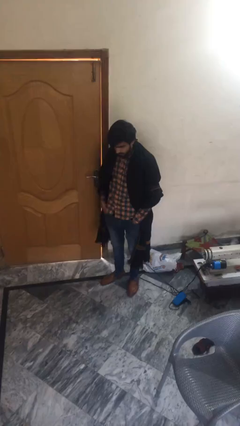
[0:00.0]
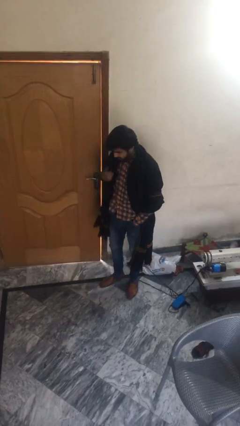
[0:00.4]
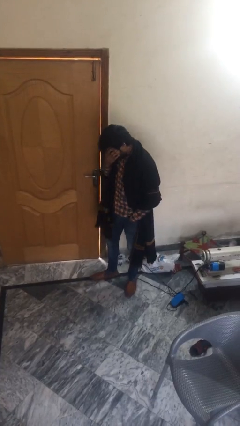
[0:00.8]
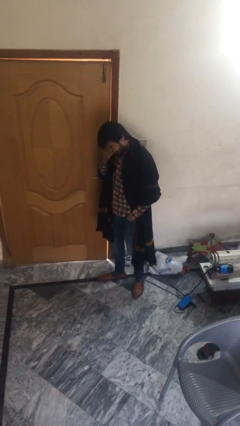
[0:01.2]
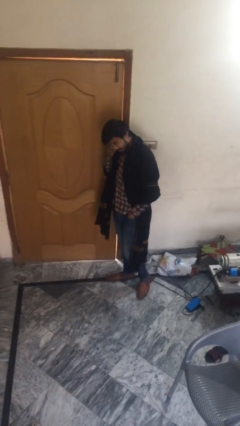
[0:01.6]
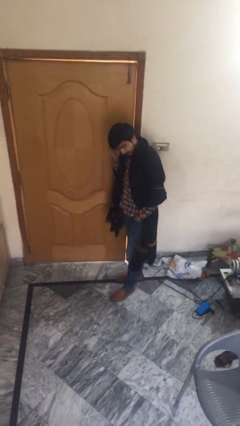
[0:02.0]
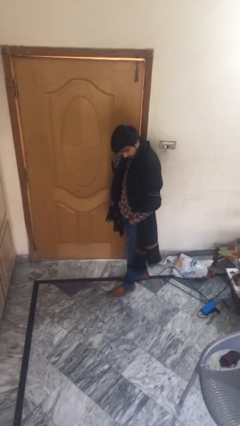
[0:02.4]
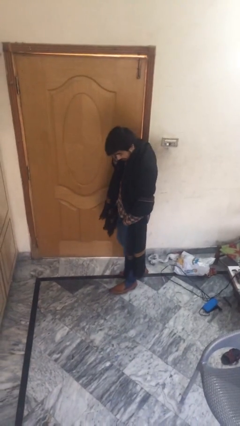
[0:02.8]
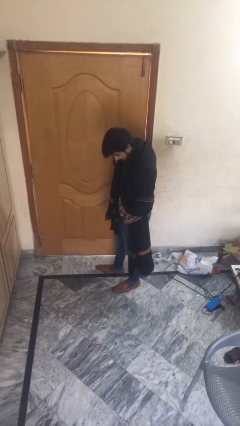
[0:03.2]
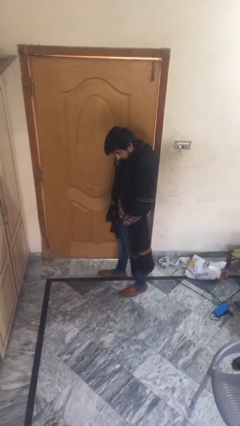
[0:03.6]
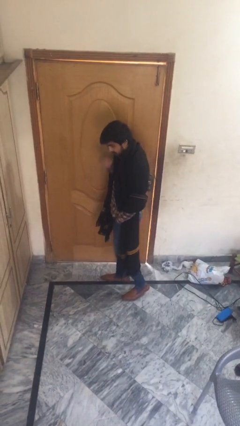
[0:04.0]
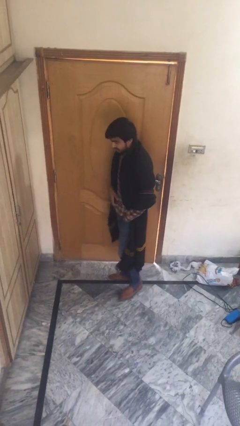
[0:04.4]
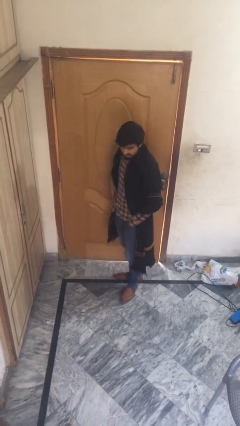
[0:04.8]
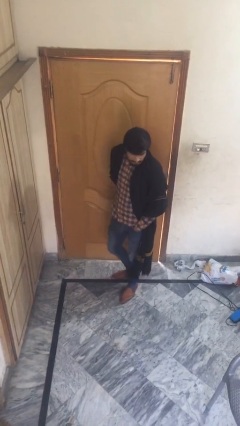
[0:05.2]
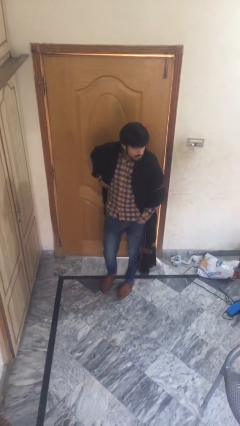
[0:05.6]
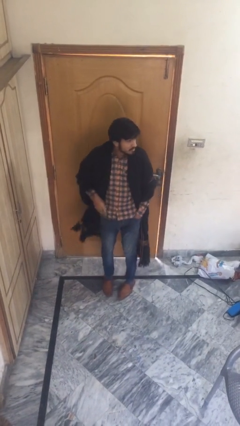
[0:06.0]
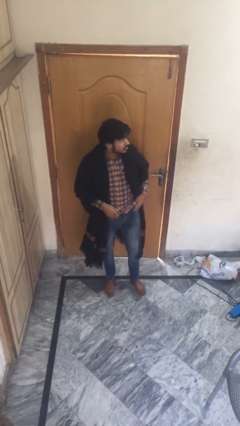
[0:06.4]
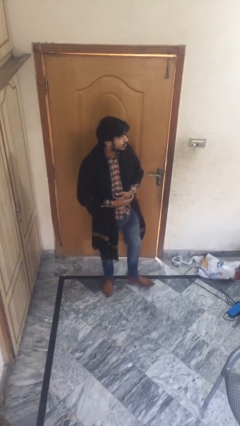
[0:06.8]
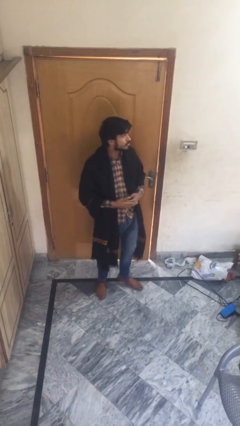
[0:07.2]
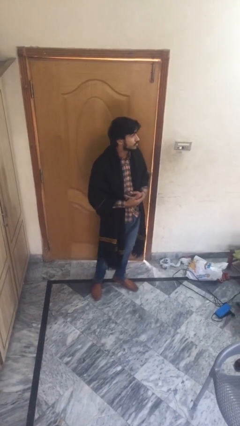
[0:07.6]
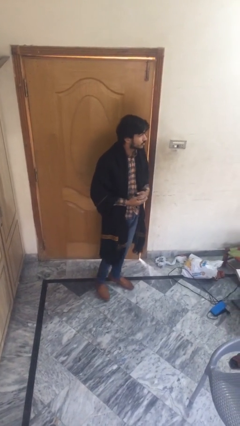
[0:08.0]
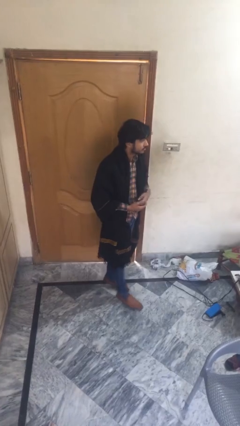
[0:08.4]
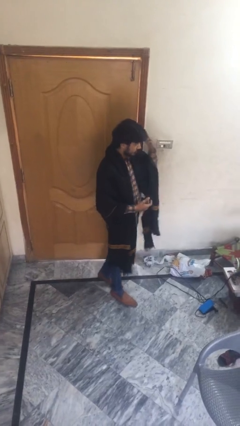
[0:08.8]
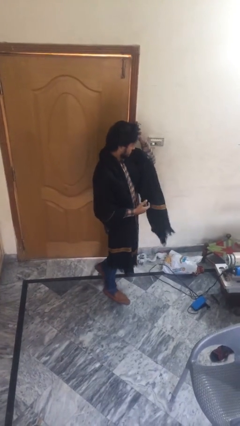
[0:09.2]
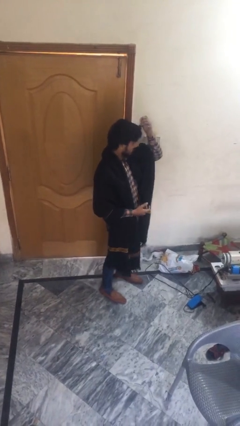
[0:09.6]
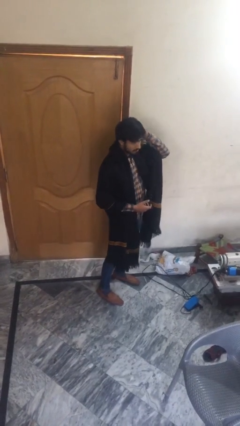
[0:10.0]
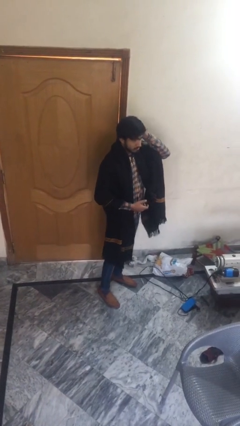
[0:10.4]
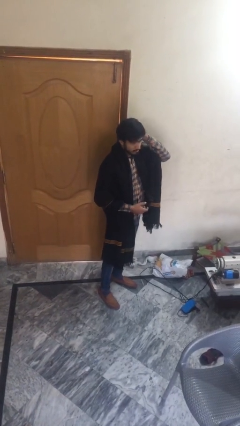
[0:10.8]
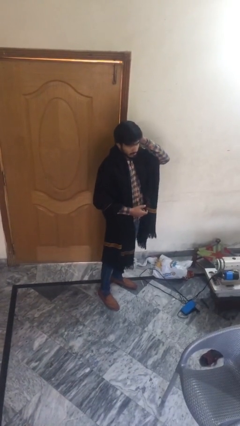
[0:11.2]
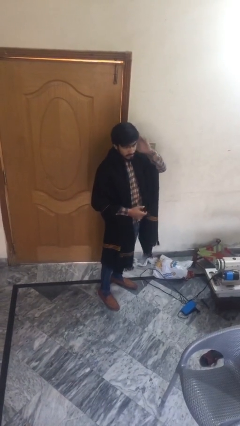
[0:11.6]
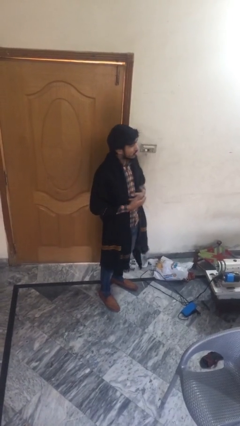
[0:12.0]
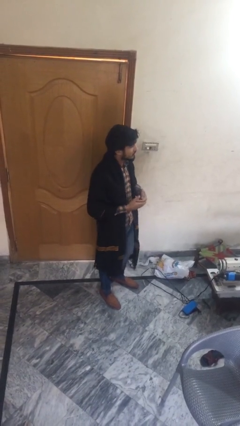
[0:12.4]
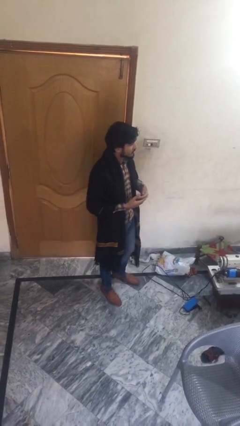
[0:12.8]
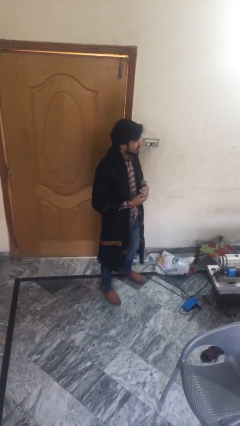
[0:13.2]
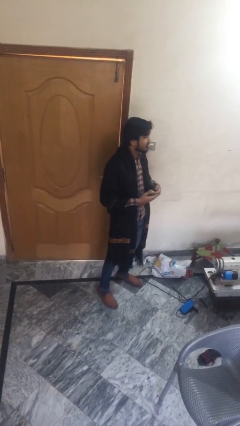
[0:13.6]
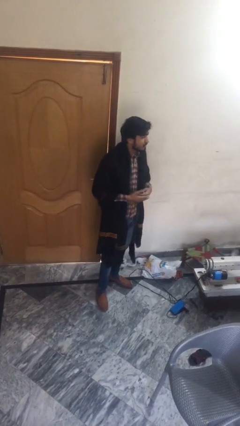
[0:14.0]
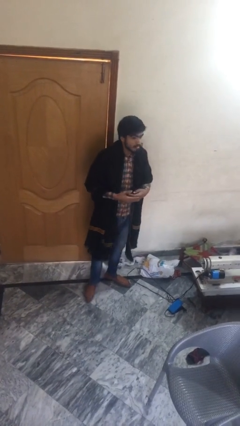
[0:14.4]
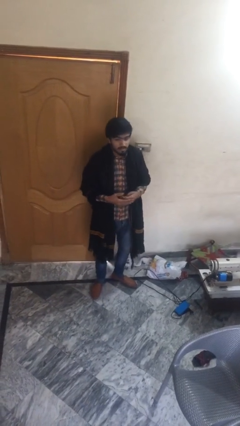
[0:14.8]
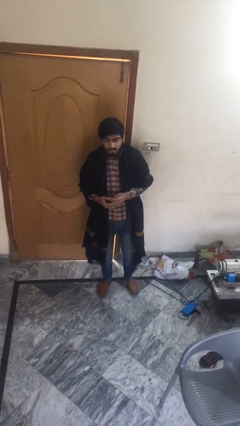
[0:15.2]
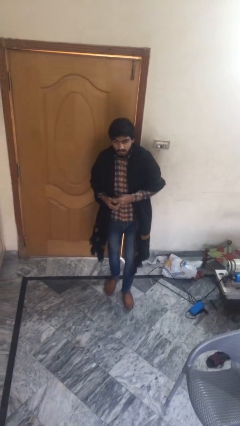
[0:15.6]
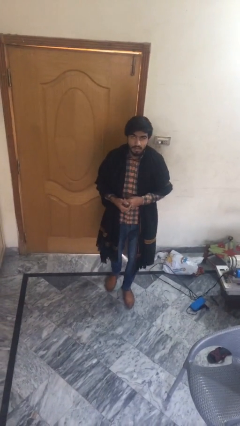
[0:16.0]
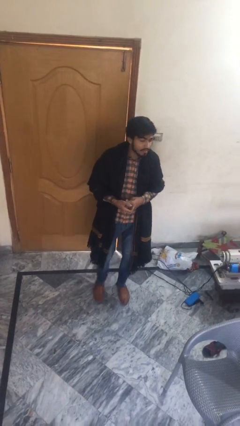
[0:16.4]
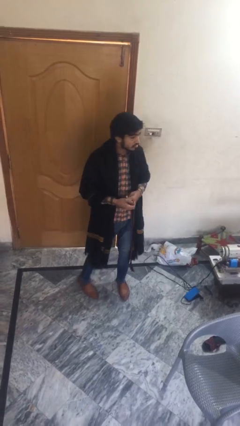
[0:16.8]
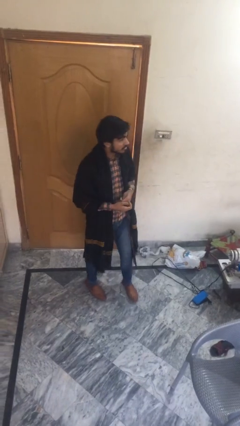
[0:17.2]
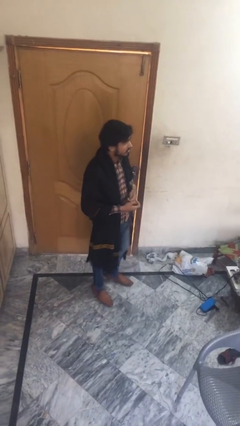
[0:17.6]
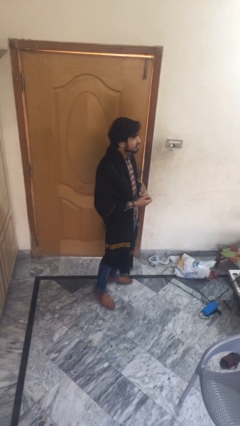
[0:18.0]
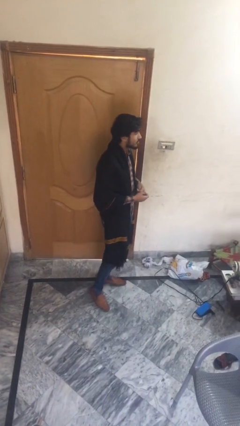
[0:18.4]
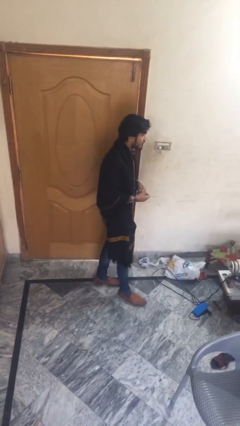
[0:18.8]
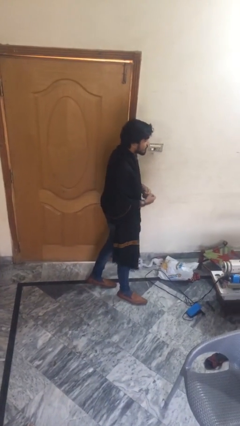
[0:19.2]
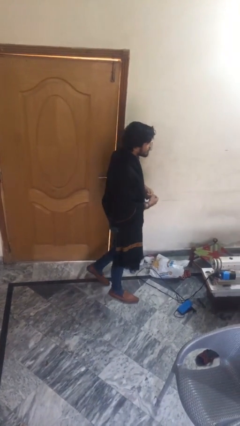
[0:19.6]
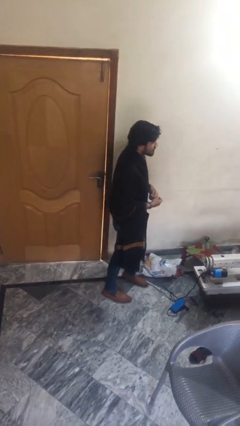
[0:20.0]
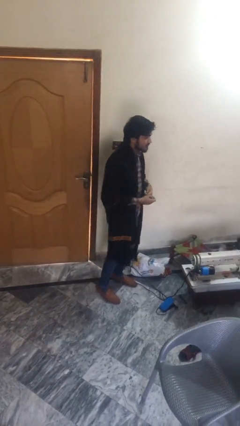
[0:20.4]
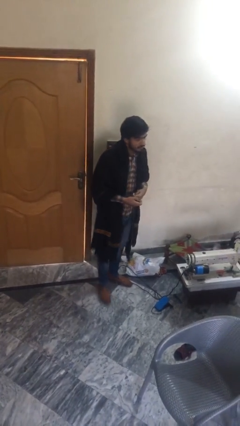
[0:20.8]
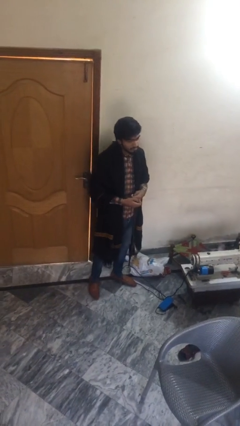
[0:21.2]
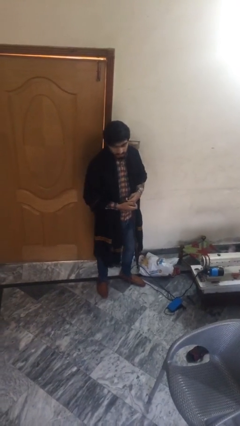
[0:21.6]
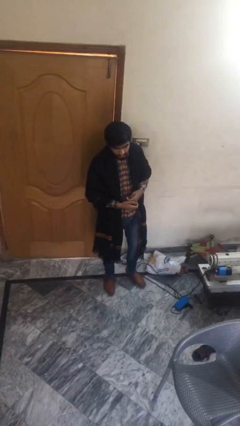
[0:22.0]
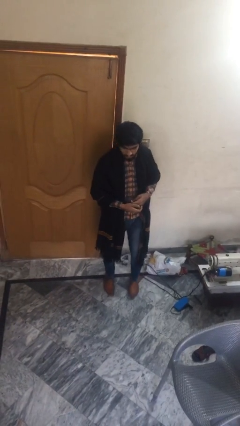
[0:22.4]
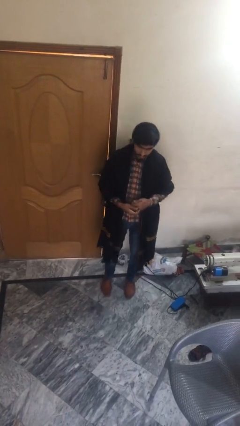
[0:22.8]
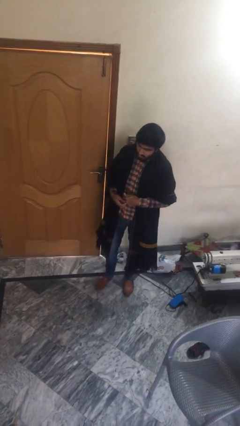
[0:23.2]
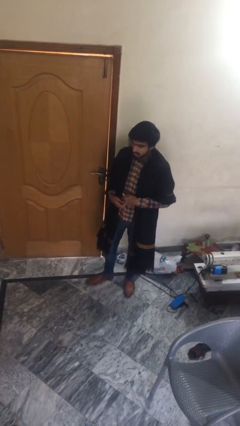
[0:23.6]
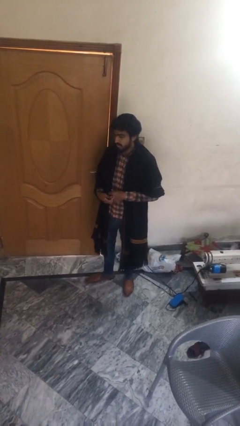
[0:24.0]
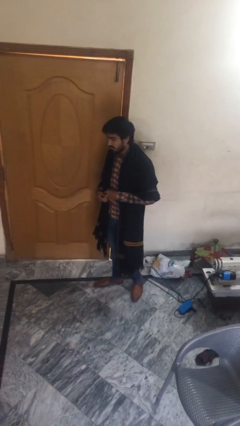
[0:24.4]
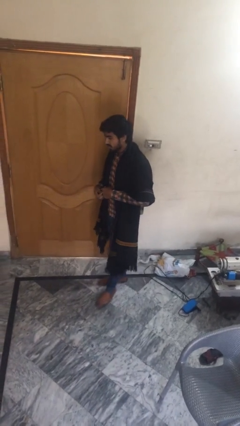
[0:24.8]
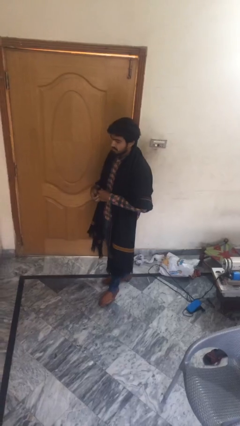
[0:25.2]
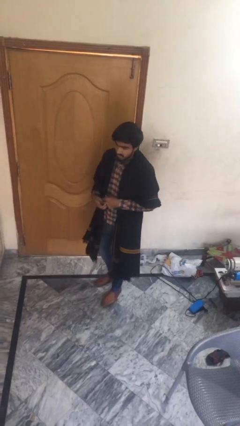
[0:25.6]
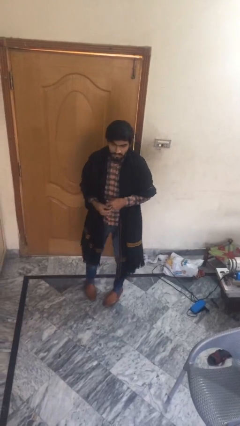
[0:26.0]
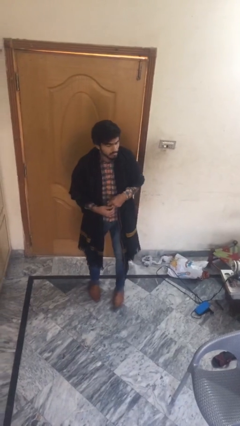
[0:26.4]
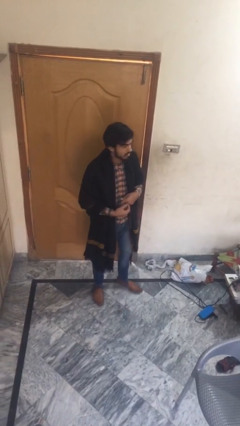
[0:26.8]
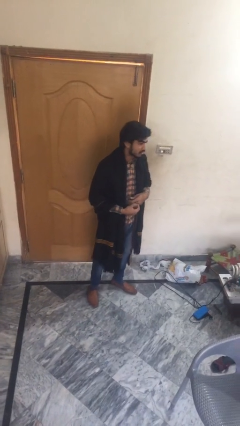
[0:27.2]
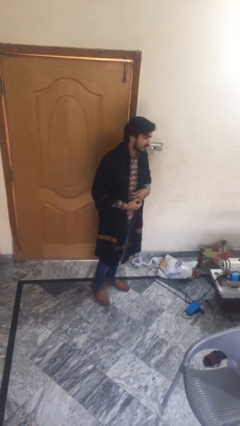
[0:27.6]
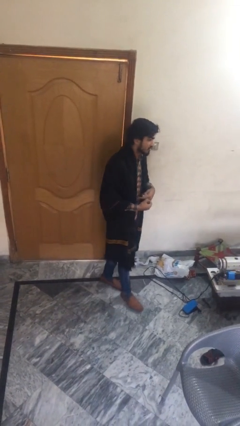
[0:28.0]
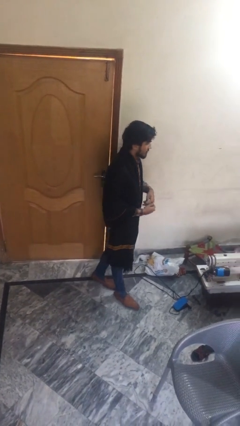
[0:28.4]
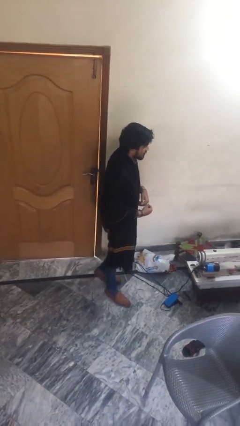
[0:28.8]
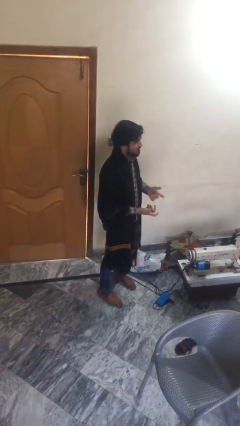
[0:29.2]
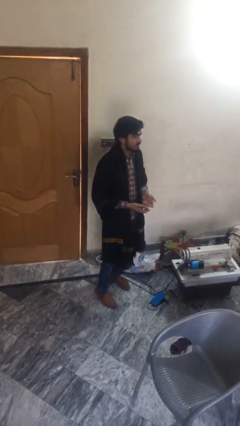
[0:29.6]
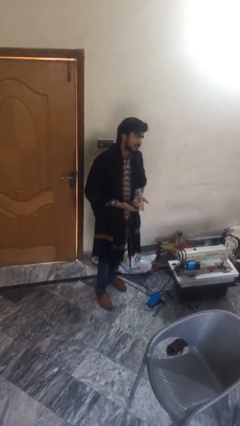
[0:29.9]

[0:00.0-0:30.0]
person walks

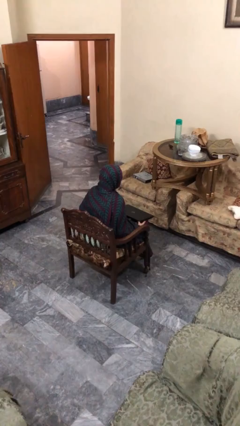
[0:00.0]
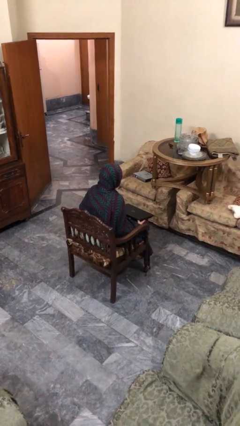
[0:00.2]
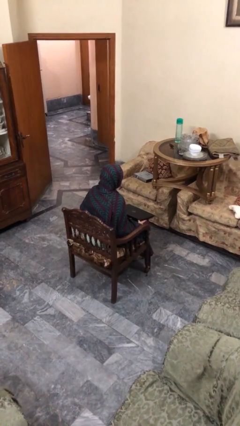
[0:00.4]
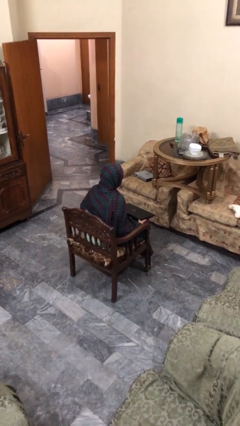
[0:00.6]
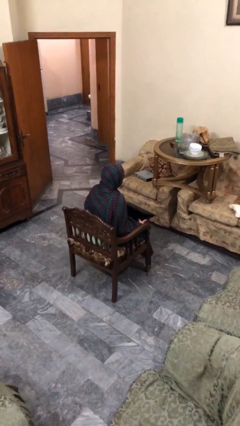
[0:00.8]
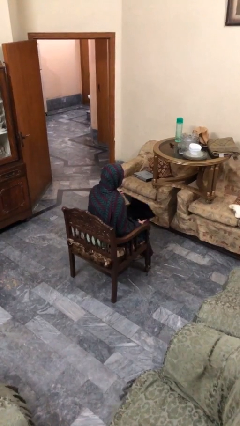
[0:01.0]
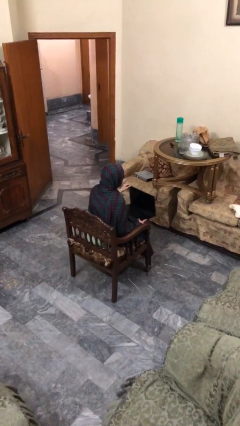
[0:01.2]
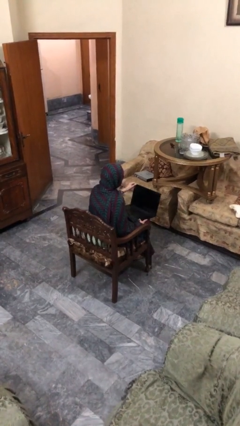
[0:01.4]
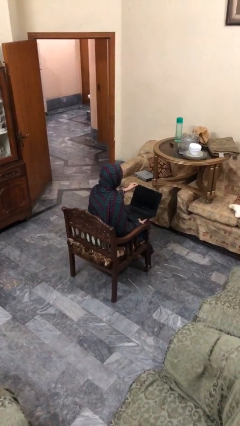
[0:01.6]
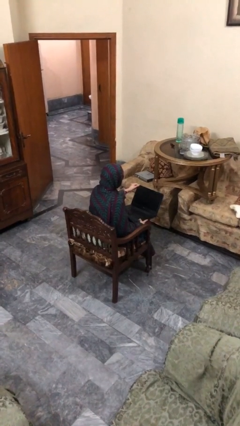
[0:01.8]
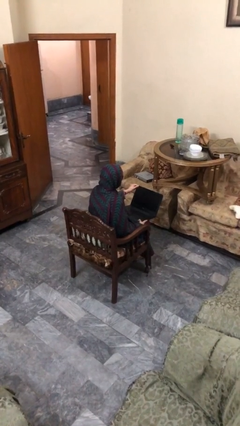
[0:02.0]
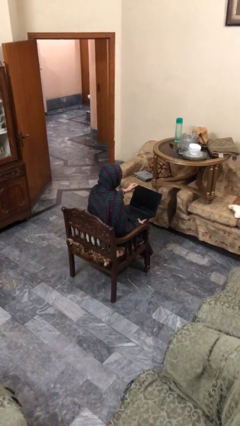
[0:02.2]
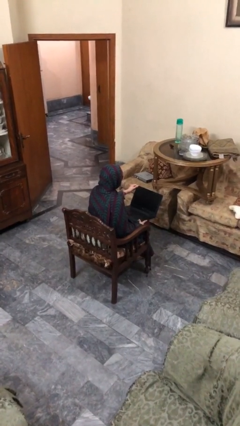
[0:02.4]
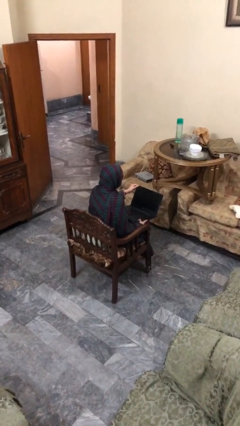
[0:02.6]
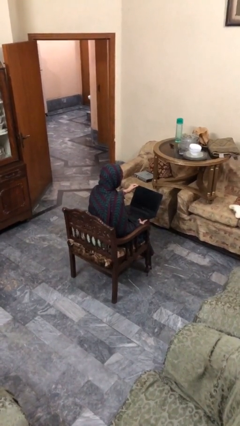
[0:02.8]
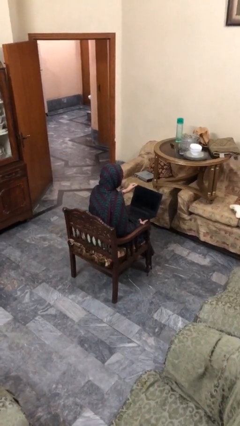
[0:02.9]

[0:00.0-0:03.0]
person opens laptop

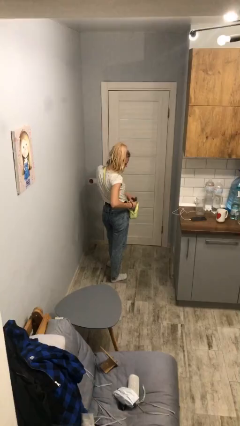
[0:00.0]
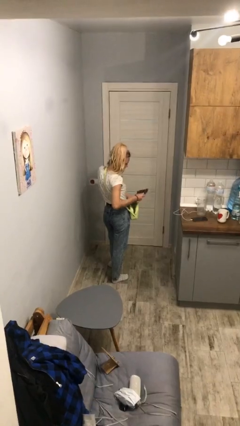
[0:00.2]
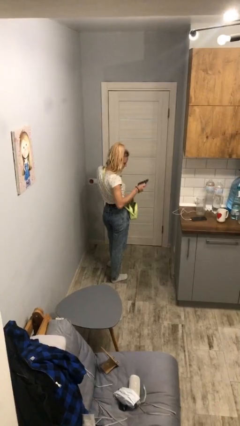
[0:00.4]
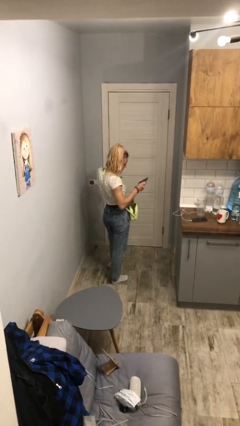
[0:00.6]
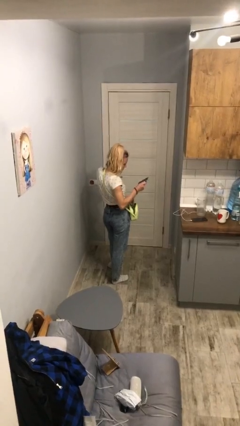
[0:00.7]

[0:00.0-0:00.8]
person takes object from purse
